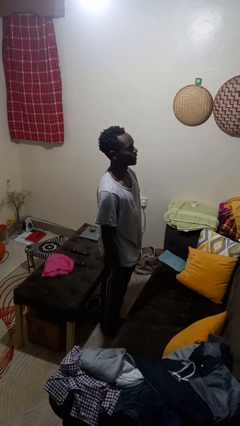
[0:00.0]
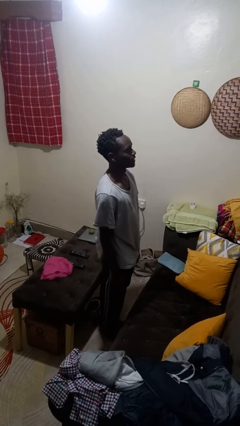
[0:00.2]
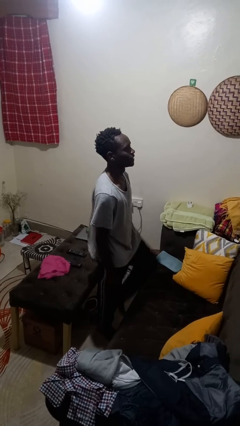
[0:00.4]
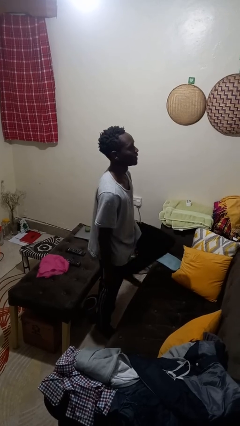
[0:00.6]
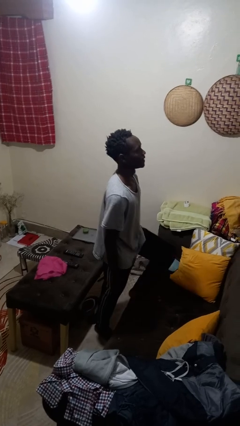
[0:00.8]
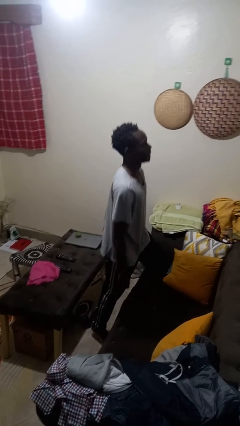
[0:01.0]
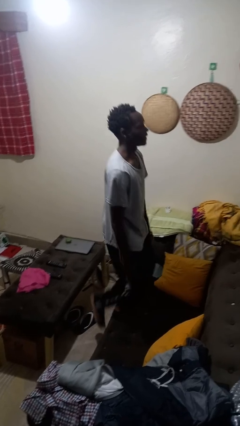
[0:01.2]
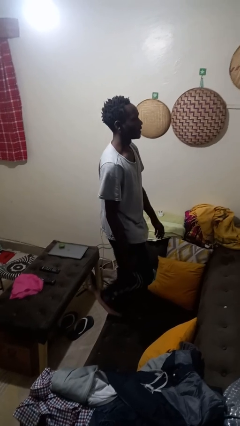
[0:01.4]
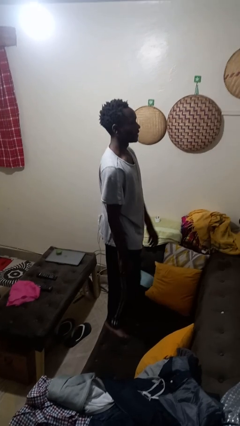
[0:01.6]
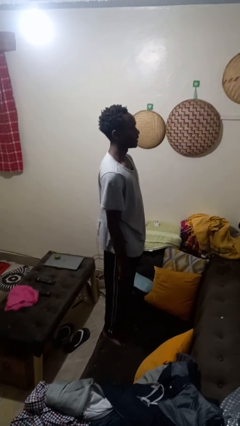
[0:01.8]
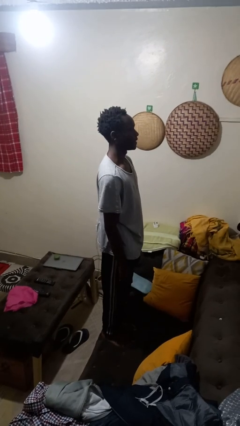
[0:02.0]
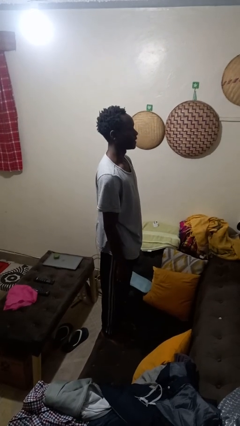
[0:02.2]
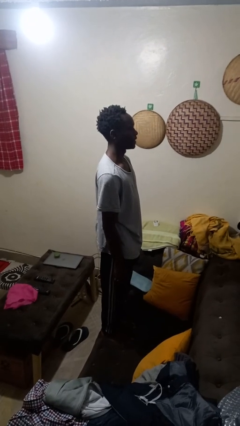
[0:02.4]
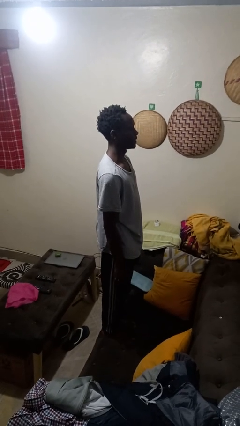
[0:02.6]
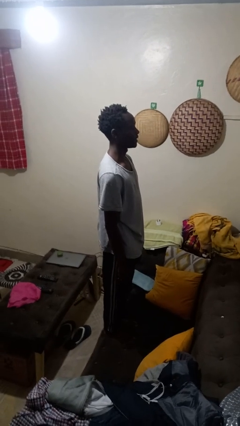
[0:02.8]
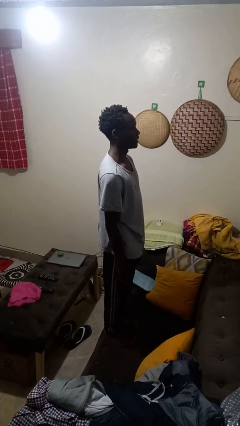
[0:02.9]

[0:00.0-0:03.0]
person climbs on couch

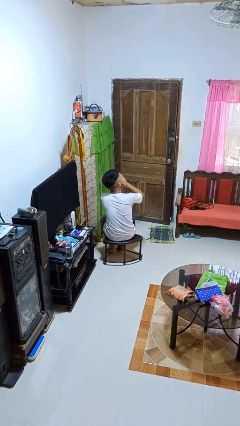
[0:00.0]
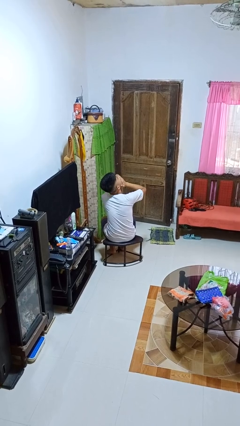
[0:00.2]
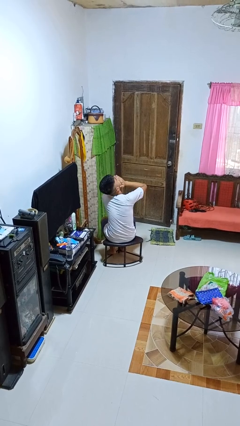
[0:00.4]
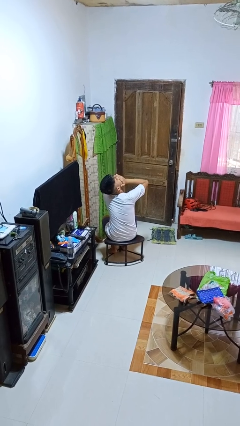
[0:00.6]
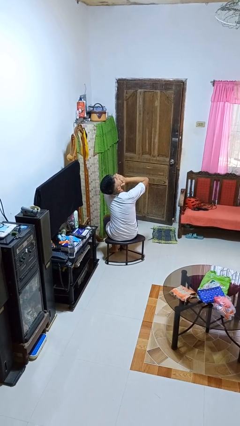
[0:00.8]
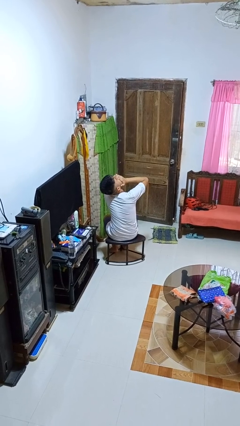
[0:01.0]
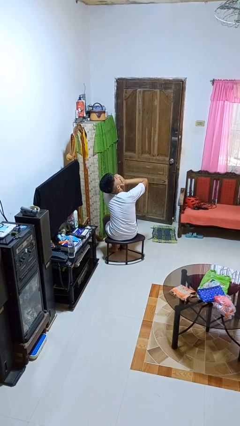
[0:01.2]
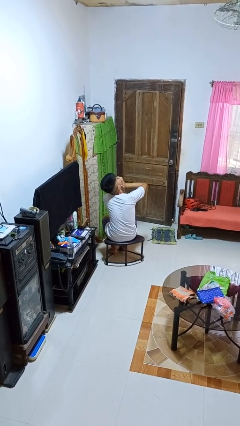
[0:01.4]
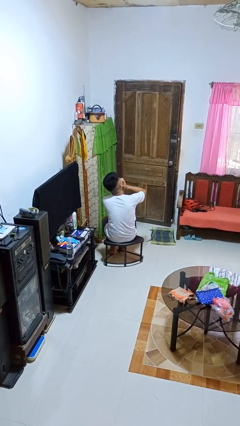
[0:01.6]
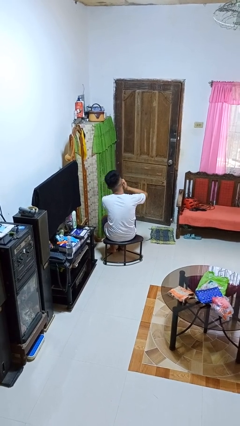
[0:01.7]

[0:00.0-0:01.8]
person yawns

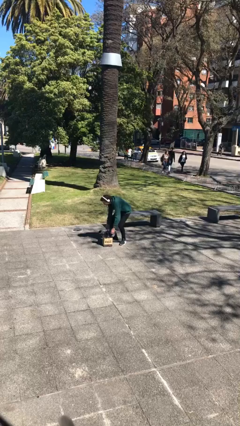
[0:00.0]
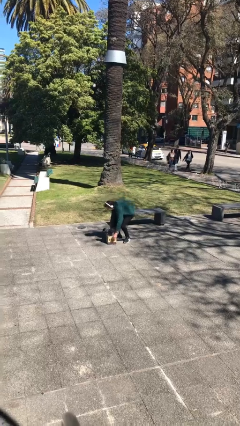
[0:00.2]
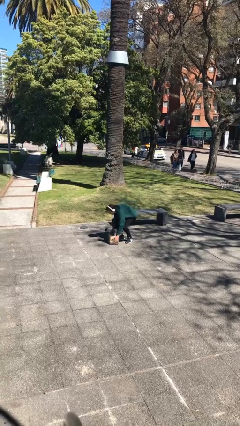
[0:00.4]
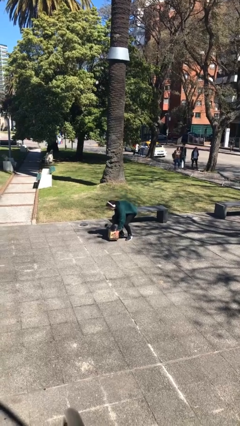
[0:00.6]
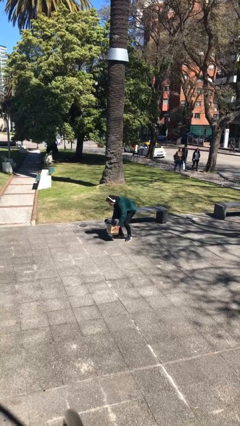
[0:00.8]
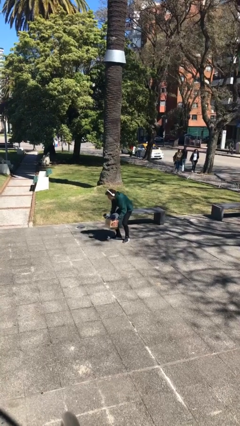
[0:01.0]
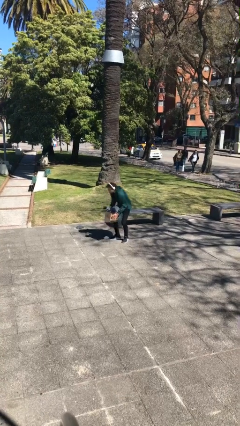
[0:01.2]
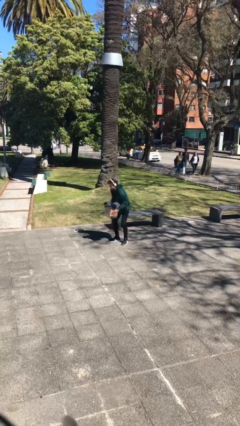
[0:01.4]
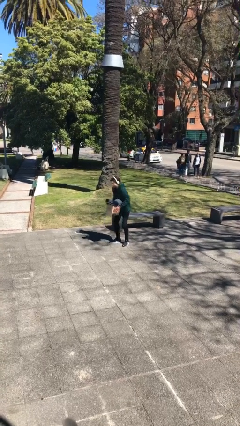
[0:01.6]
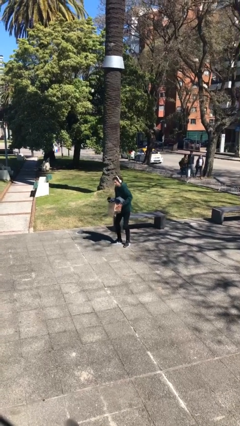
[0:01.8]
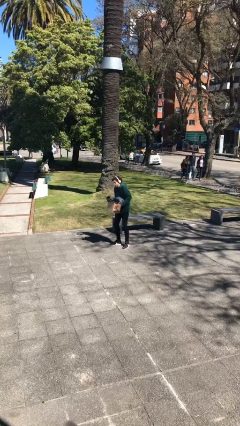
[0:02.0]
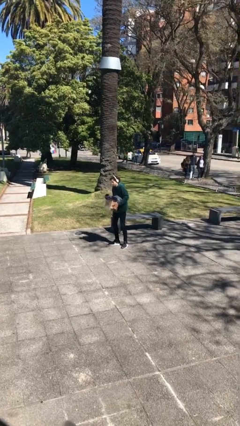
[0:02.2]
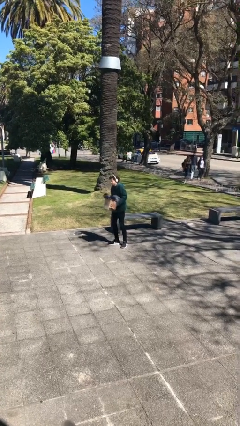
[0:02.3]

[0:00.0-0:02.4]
person picks up object from floor

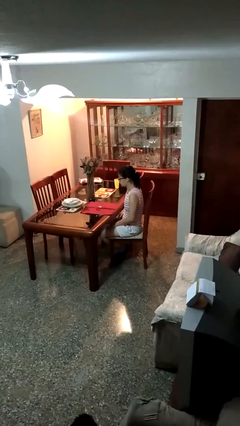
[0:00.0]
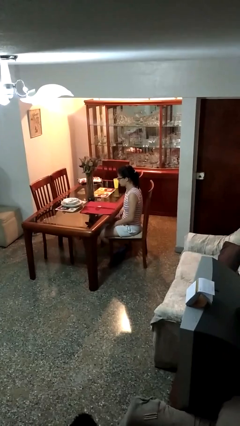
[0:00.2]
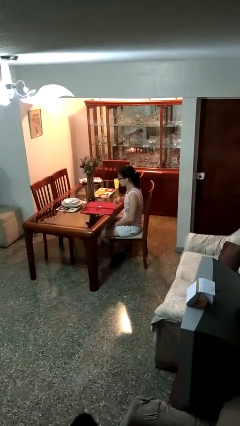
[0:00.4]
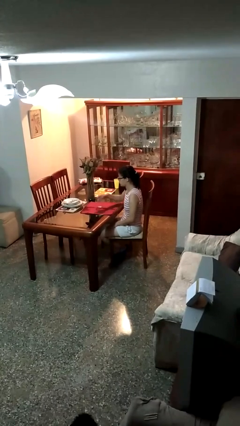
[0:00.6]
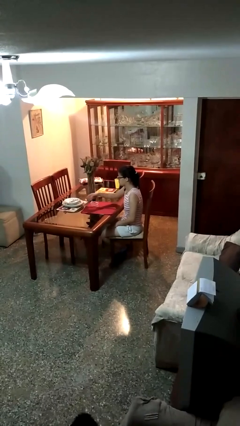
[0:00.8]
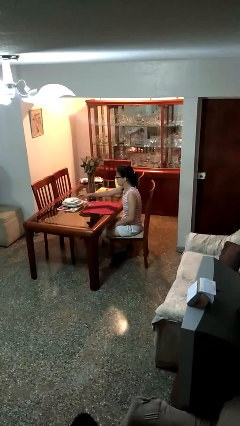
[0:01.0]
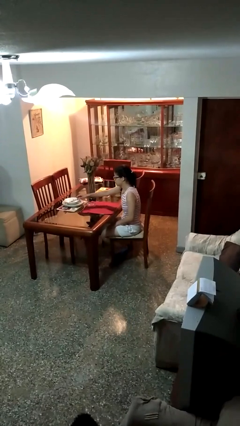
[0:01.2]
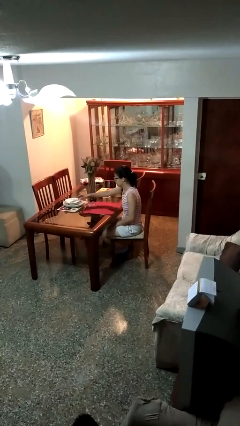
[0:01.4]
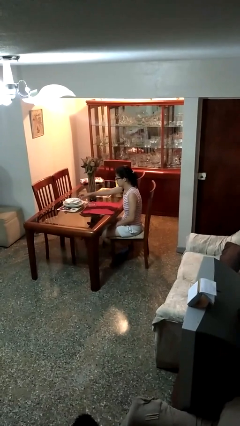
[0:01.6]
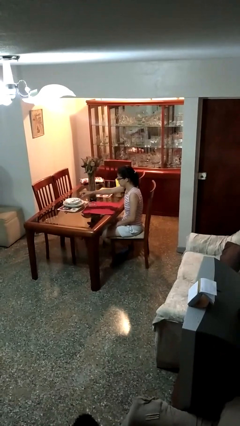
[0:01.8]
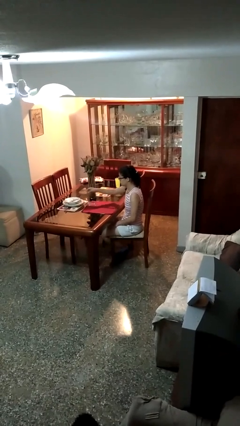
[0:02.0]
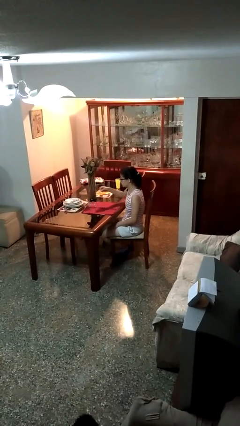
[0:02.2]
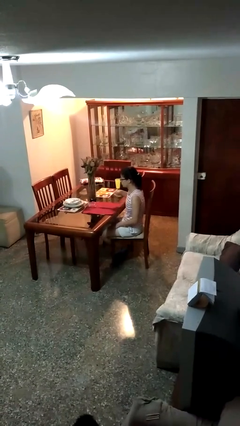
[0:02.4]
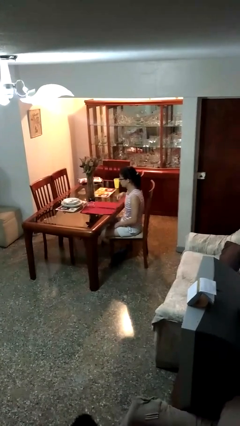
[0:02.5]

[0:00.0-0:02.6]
person knocks over glass

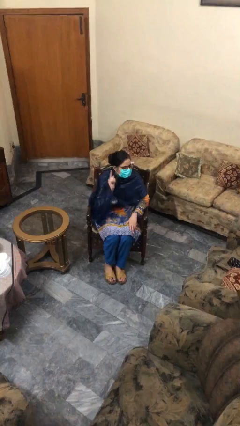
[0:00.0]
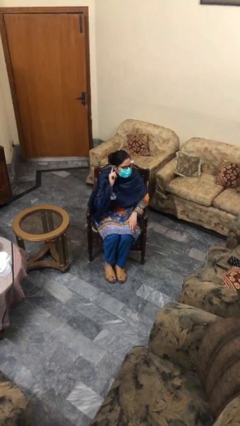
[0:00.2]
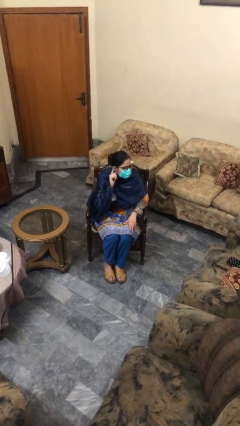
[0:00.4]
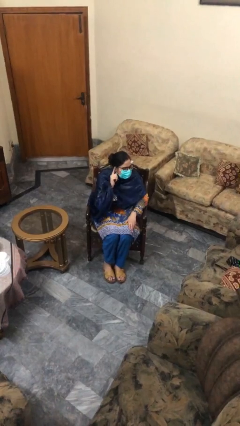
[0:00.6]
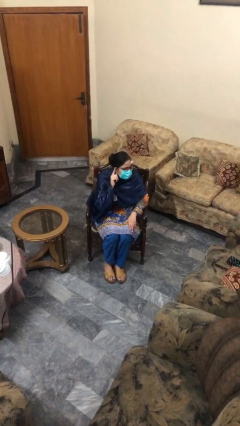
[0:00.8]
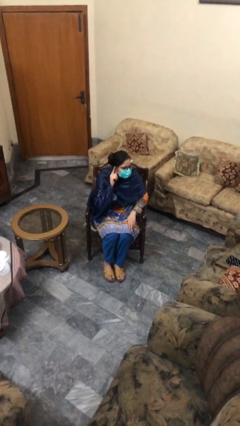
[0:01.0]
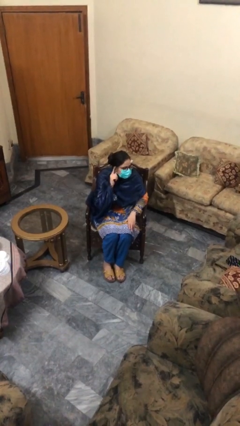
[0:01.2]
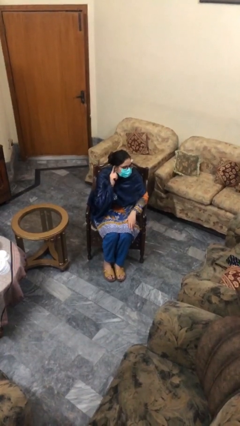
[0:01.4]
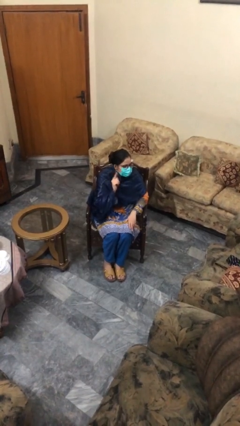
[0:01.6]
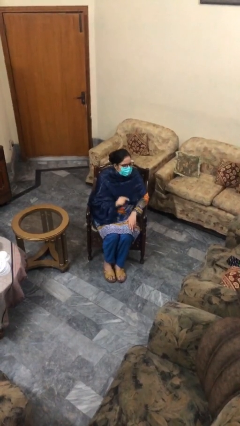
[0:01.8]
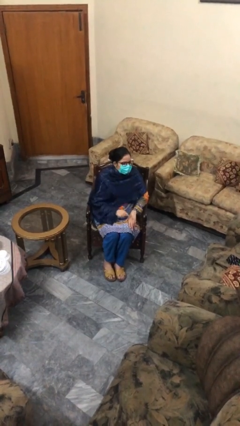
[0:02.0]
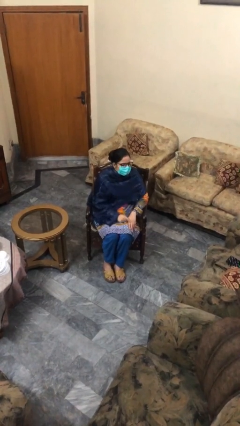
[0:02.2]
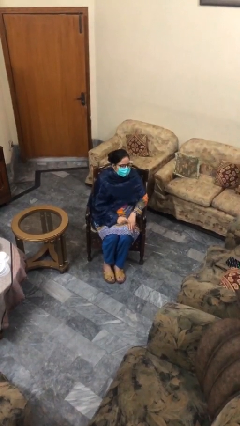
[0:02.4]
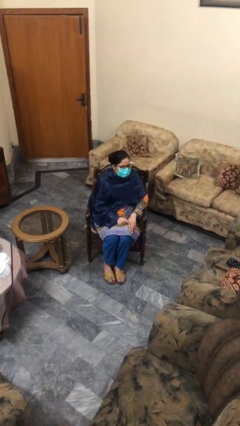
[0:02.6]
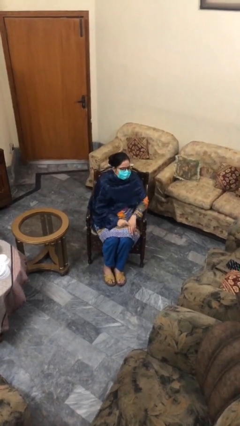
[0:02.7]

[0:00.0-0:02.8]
person gestures listen closely

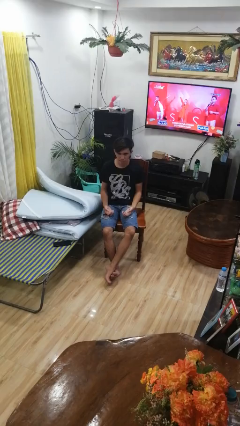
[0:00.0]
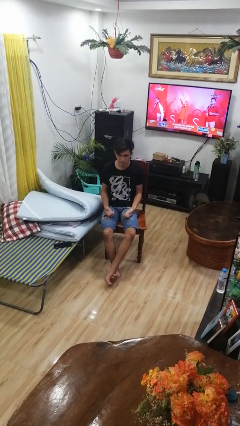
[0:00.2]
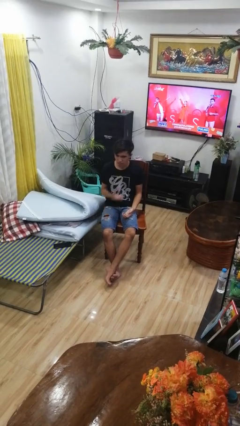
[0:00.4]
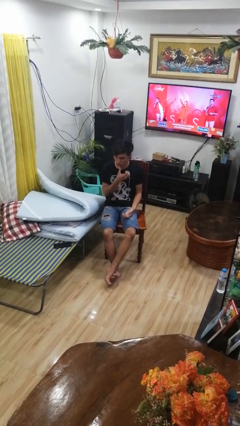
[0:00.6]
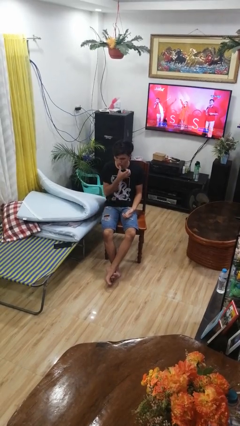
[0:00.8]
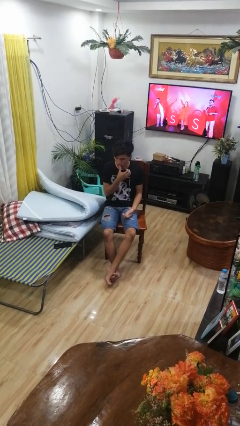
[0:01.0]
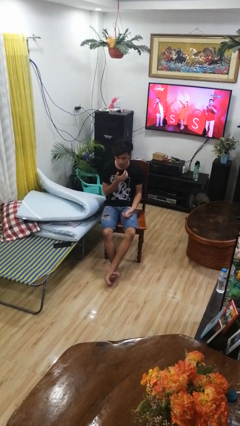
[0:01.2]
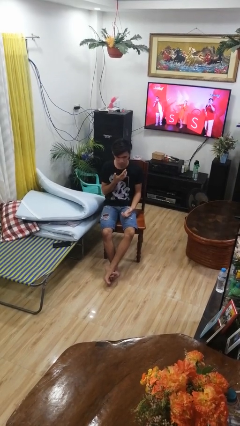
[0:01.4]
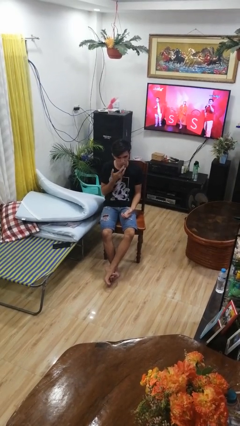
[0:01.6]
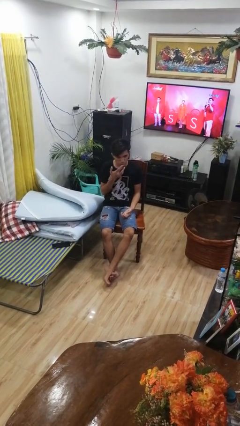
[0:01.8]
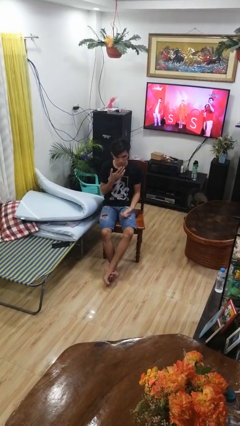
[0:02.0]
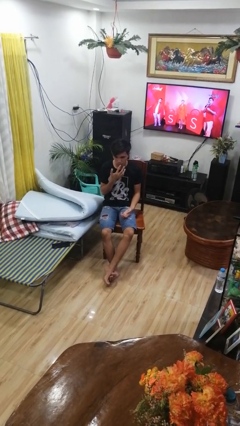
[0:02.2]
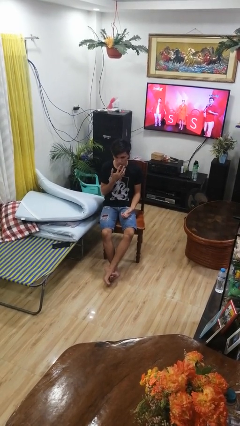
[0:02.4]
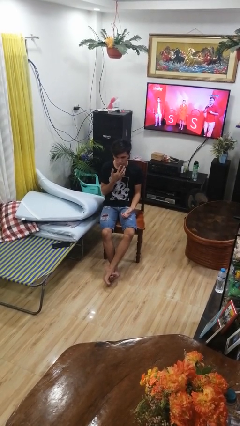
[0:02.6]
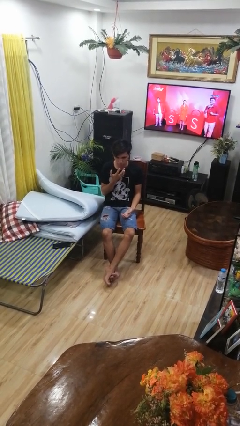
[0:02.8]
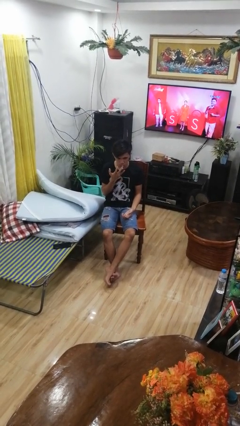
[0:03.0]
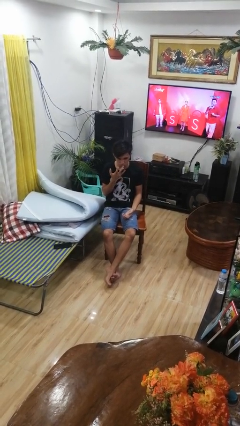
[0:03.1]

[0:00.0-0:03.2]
person licks fingers

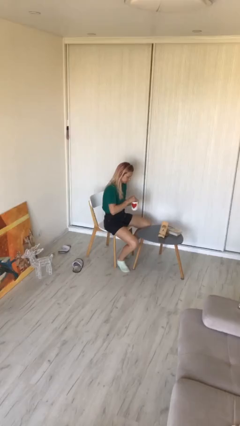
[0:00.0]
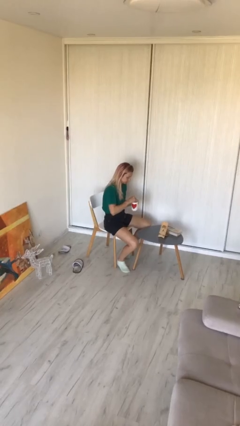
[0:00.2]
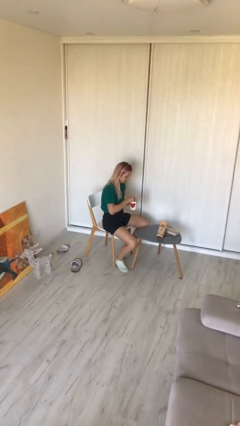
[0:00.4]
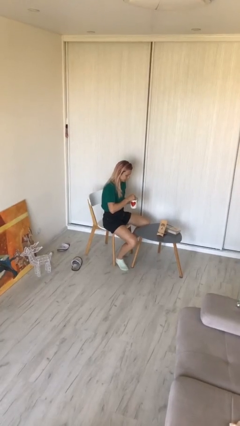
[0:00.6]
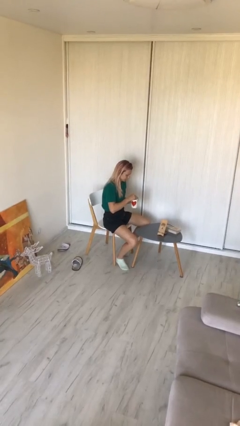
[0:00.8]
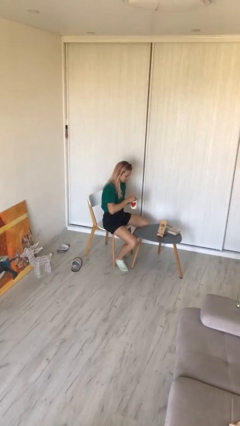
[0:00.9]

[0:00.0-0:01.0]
person stirs mug

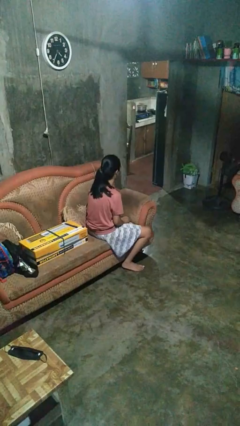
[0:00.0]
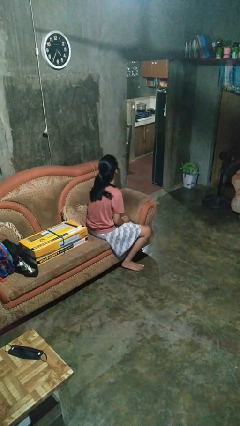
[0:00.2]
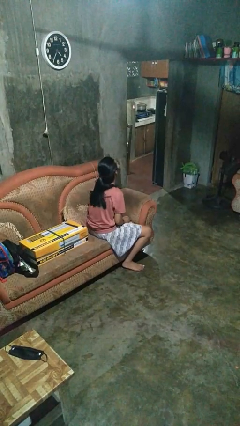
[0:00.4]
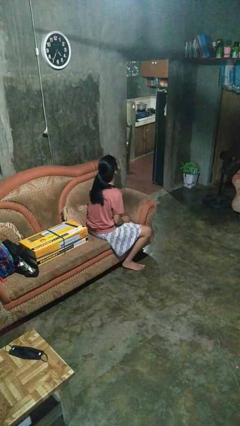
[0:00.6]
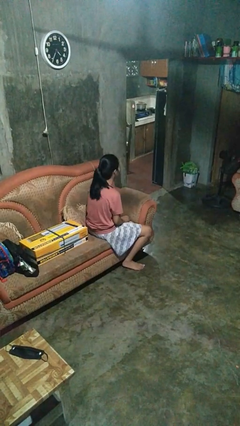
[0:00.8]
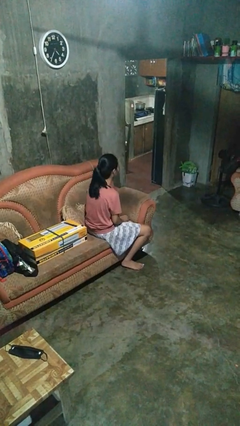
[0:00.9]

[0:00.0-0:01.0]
person nods head
